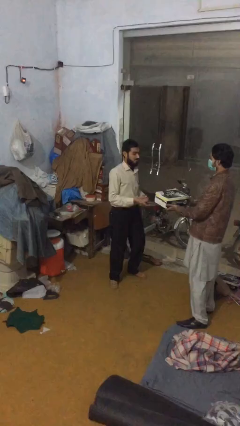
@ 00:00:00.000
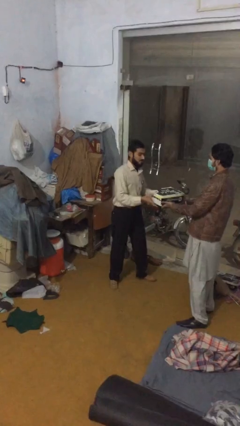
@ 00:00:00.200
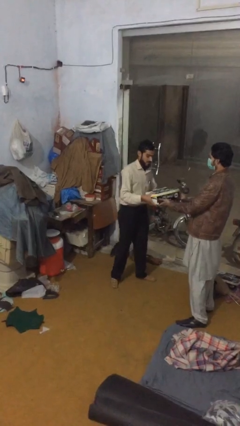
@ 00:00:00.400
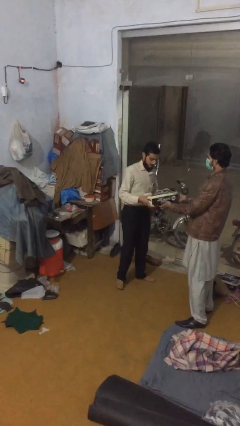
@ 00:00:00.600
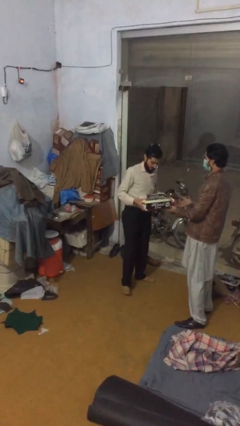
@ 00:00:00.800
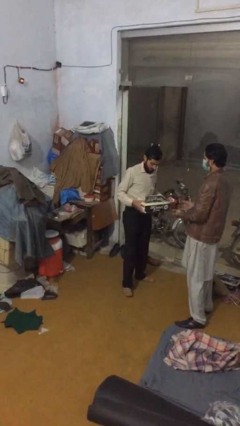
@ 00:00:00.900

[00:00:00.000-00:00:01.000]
person transfers object to person

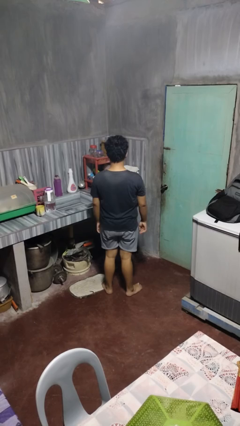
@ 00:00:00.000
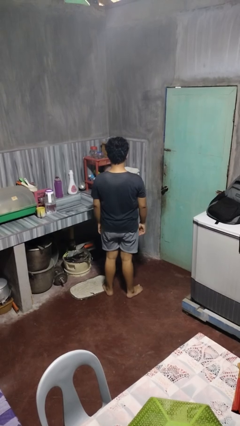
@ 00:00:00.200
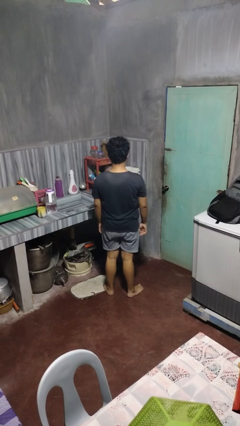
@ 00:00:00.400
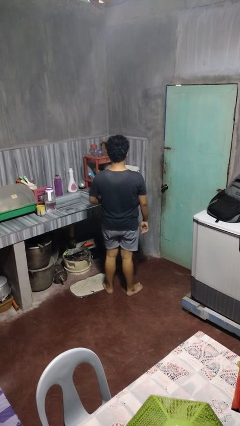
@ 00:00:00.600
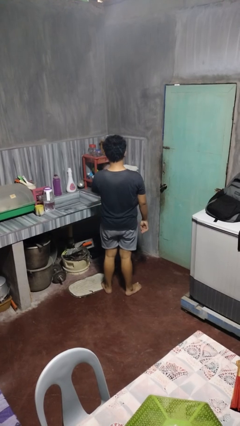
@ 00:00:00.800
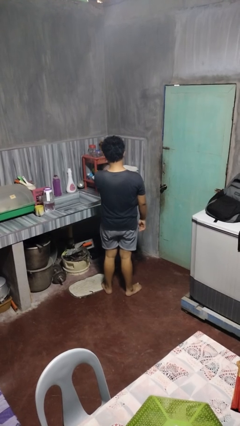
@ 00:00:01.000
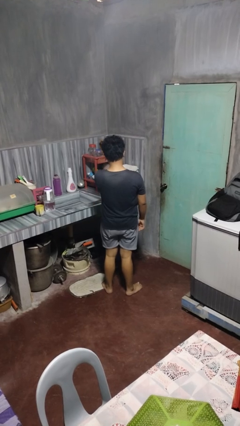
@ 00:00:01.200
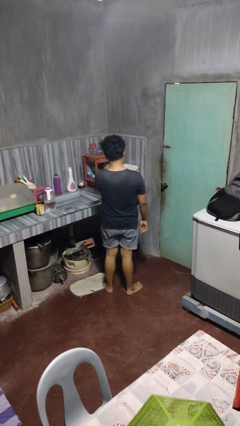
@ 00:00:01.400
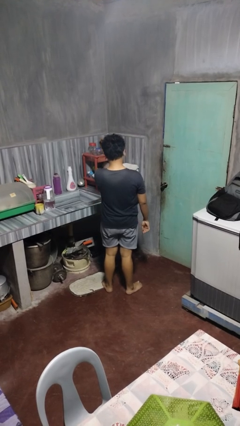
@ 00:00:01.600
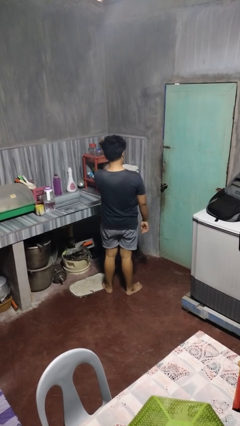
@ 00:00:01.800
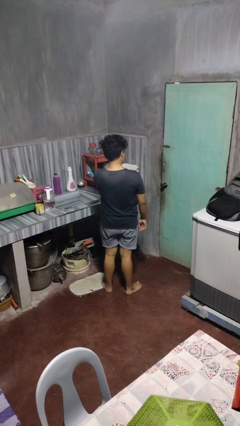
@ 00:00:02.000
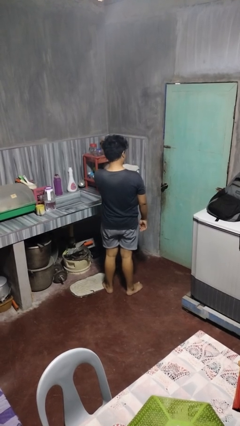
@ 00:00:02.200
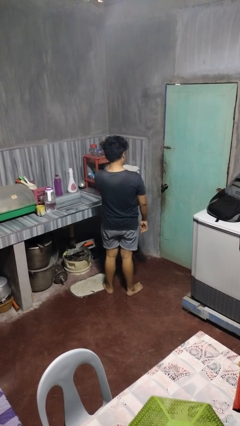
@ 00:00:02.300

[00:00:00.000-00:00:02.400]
person rubs eyes

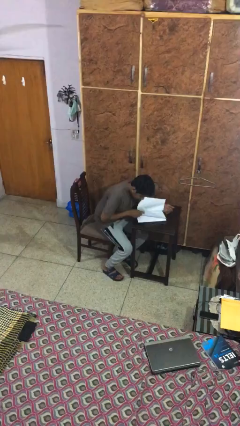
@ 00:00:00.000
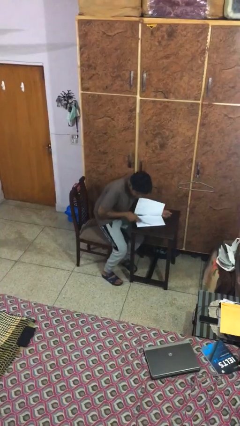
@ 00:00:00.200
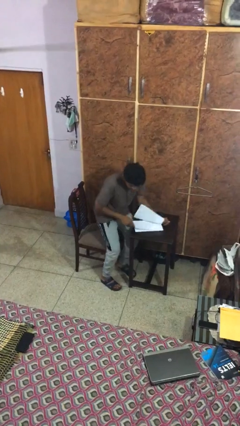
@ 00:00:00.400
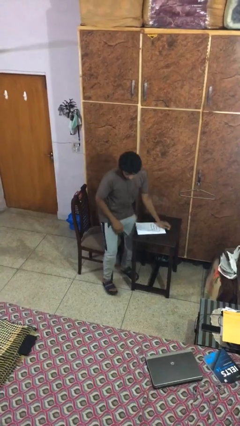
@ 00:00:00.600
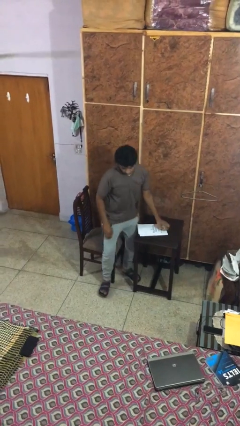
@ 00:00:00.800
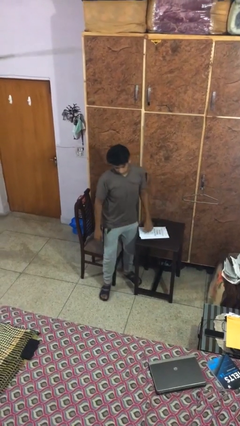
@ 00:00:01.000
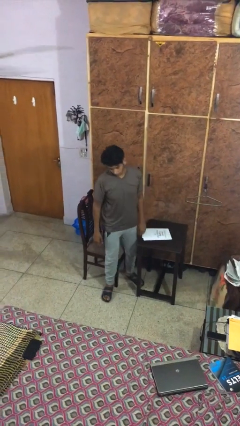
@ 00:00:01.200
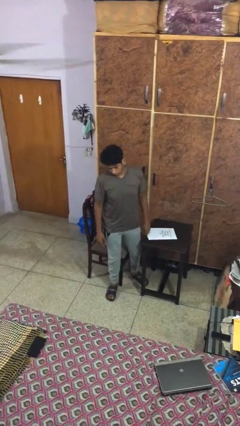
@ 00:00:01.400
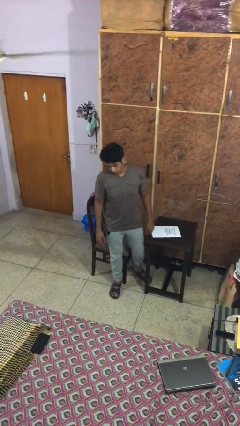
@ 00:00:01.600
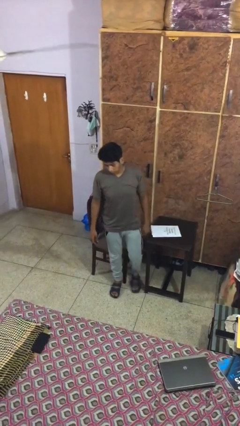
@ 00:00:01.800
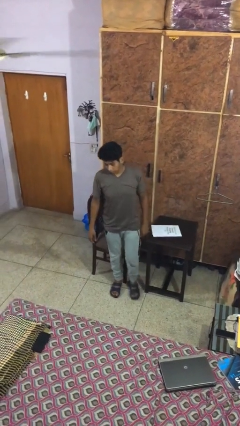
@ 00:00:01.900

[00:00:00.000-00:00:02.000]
person stands up

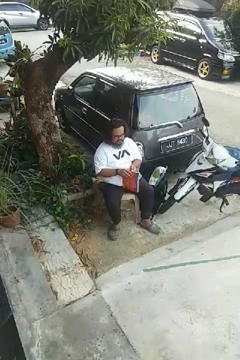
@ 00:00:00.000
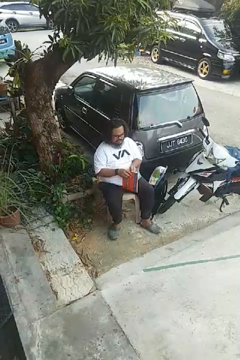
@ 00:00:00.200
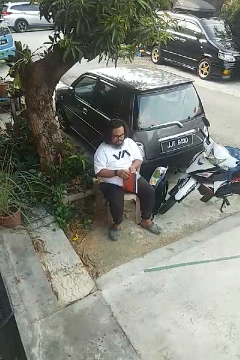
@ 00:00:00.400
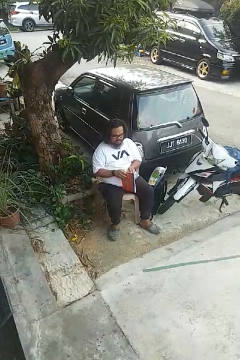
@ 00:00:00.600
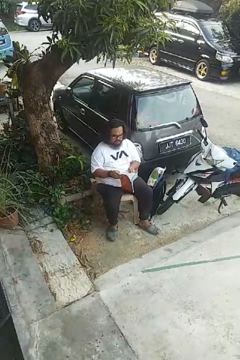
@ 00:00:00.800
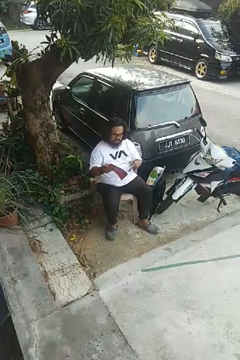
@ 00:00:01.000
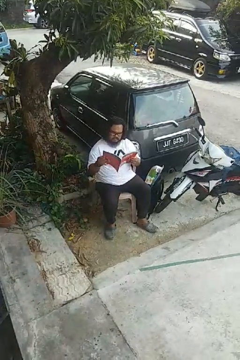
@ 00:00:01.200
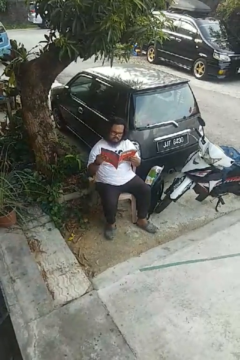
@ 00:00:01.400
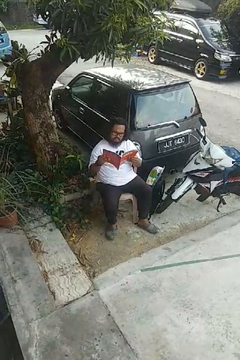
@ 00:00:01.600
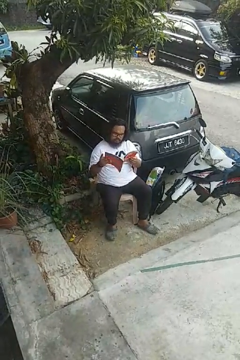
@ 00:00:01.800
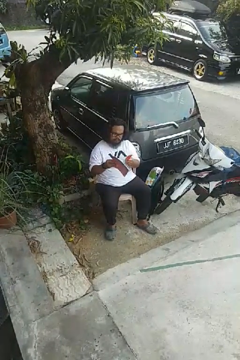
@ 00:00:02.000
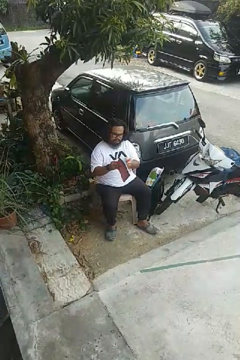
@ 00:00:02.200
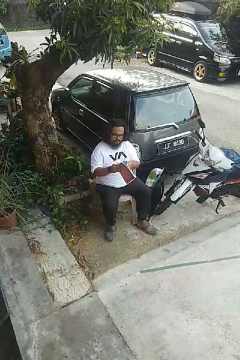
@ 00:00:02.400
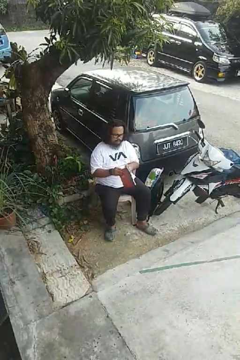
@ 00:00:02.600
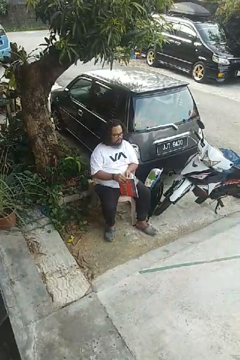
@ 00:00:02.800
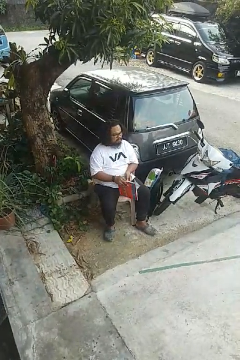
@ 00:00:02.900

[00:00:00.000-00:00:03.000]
person reads magazine

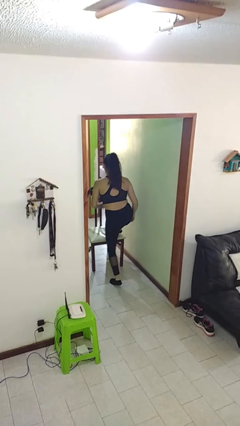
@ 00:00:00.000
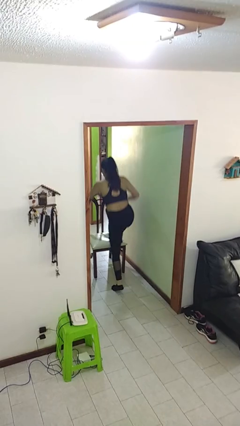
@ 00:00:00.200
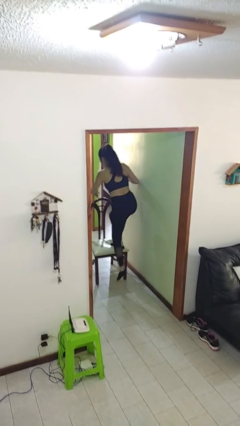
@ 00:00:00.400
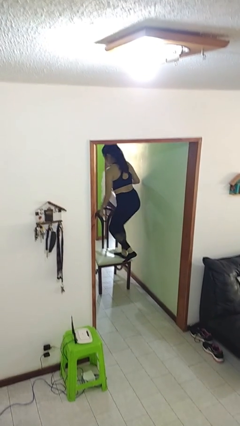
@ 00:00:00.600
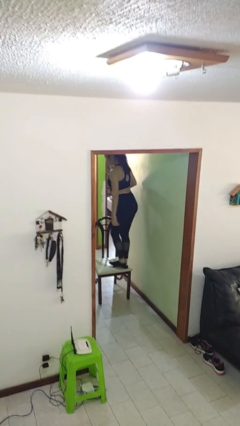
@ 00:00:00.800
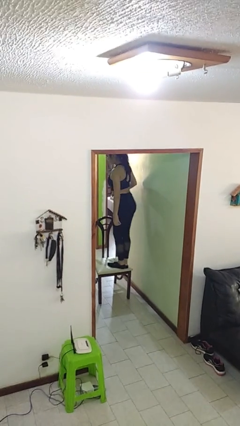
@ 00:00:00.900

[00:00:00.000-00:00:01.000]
person climbs on chair

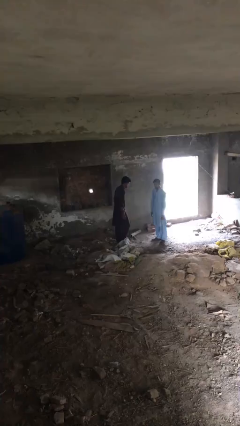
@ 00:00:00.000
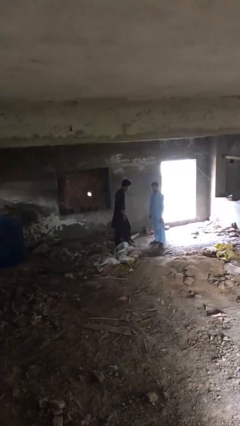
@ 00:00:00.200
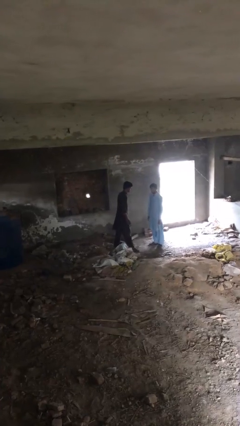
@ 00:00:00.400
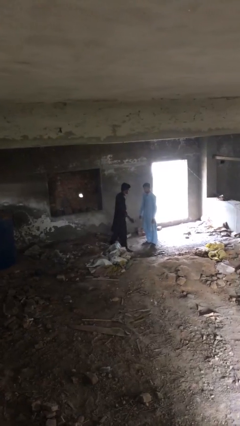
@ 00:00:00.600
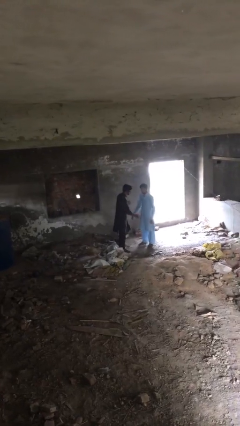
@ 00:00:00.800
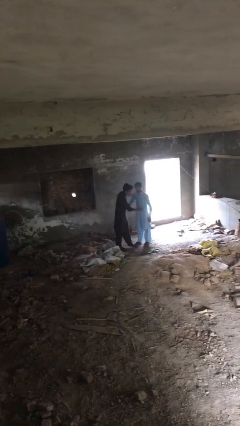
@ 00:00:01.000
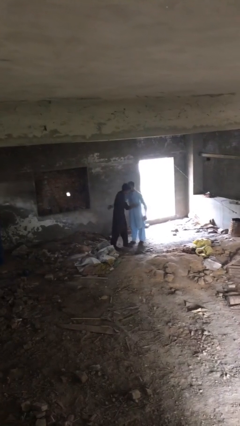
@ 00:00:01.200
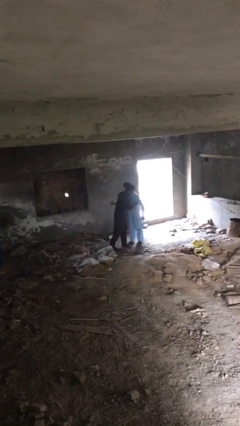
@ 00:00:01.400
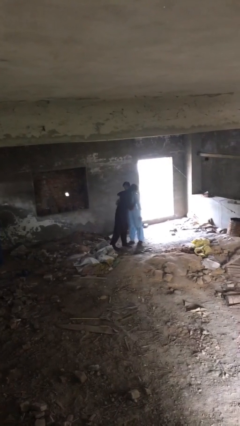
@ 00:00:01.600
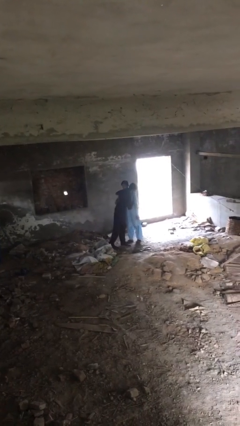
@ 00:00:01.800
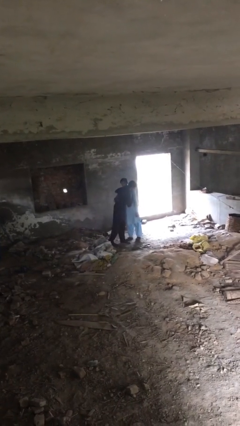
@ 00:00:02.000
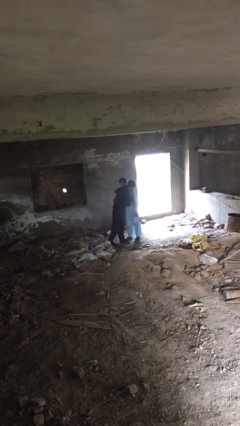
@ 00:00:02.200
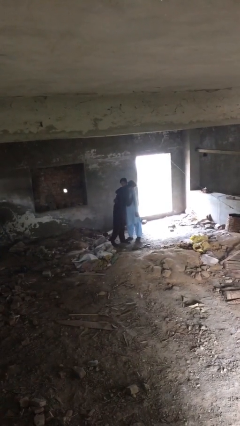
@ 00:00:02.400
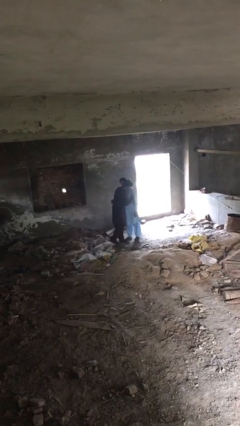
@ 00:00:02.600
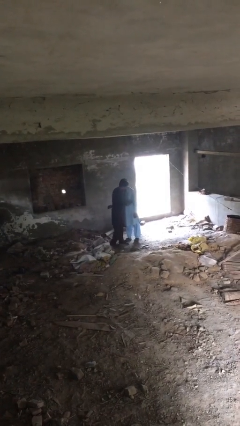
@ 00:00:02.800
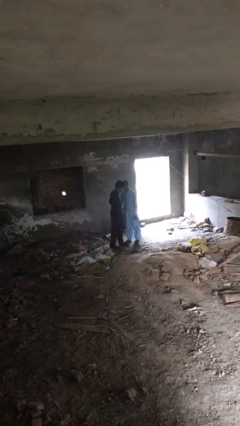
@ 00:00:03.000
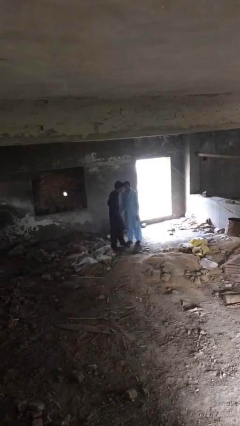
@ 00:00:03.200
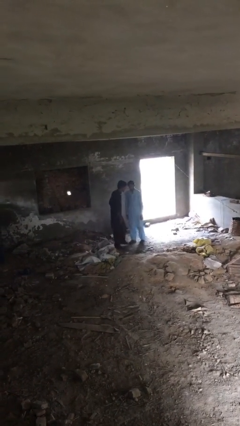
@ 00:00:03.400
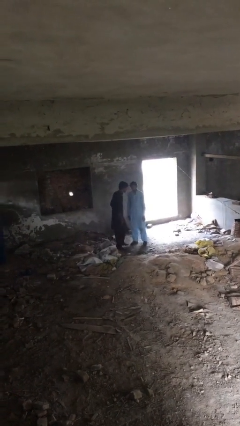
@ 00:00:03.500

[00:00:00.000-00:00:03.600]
person embraces person

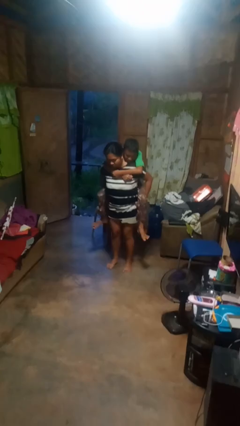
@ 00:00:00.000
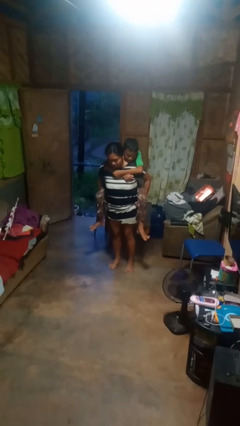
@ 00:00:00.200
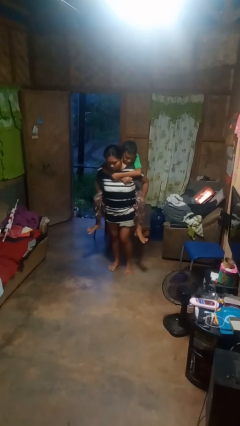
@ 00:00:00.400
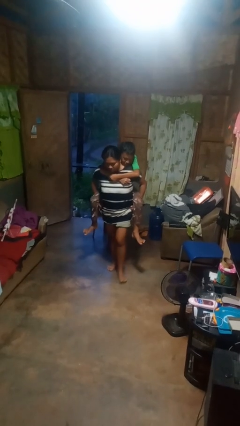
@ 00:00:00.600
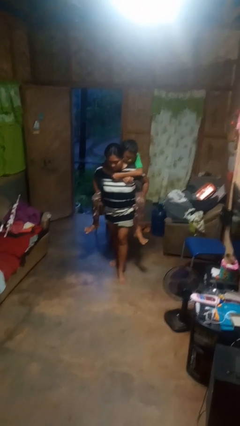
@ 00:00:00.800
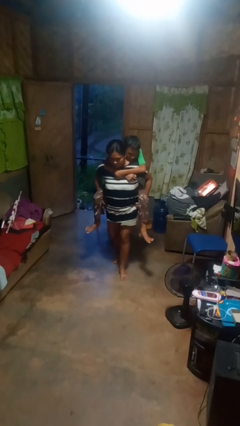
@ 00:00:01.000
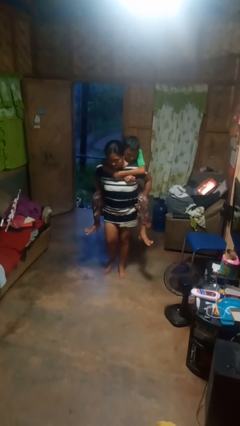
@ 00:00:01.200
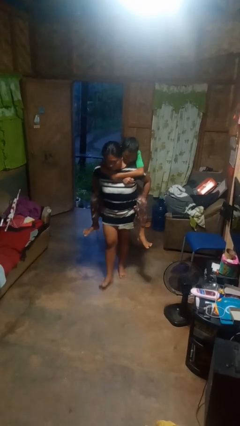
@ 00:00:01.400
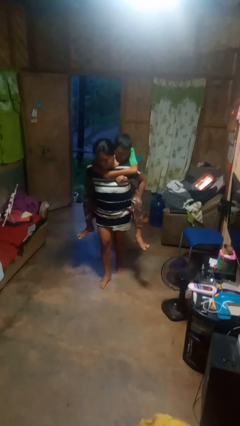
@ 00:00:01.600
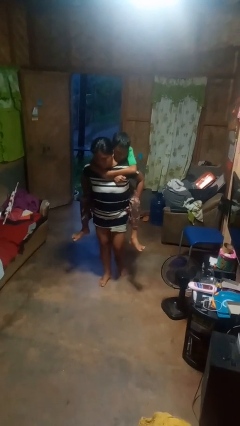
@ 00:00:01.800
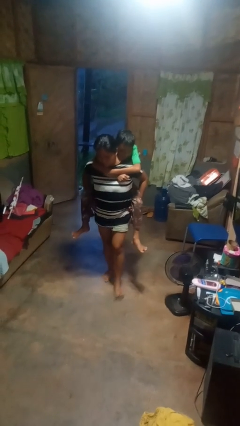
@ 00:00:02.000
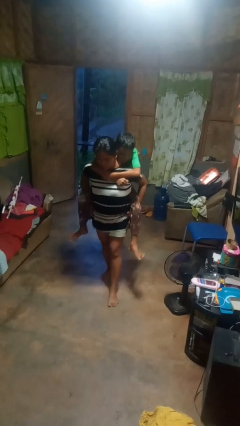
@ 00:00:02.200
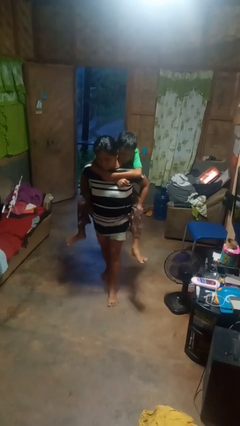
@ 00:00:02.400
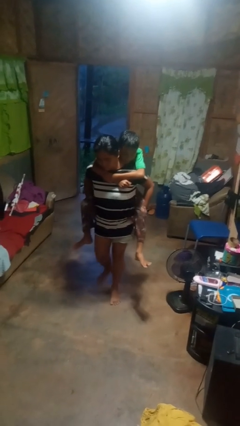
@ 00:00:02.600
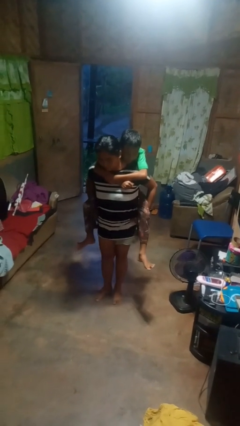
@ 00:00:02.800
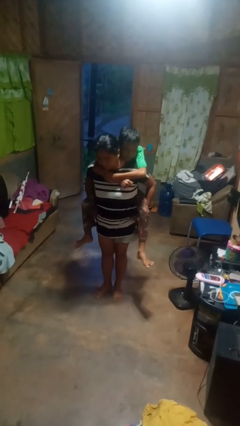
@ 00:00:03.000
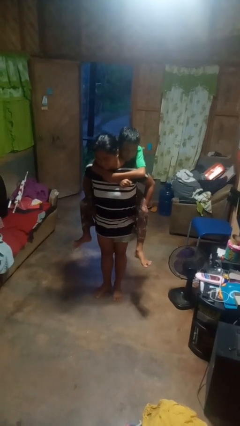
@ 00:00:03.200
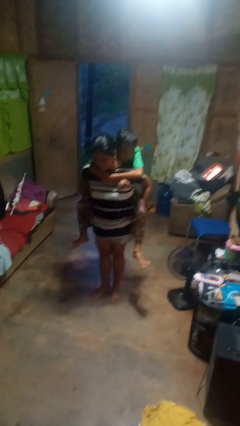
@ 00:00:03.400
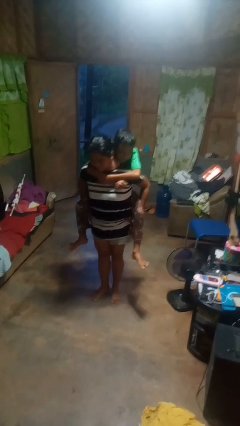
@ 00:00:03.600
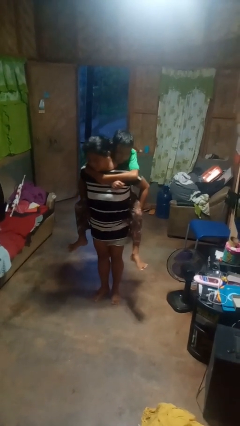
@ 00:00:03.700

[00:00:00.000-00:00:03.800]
person carries person on back

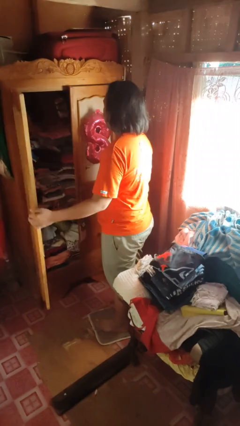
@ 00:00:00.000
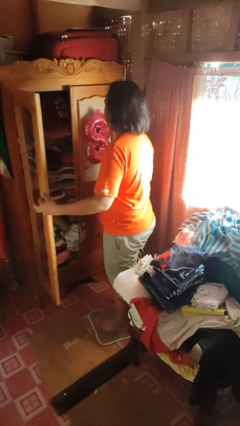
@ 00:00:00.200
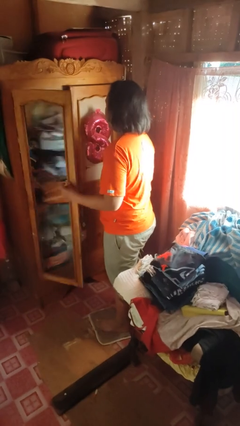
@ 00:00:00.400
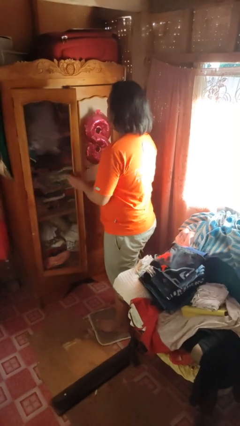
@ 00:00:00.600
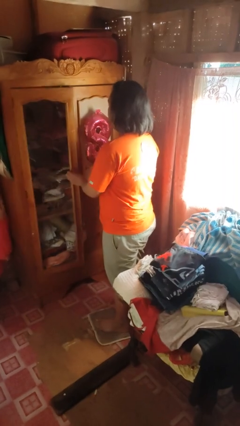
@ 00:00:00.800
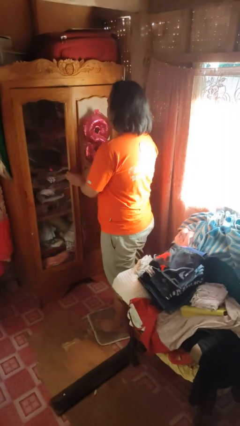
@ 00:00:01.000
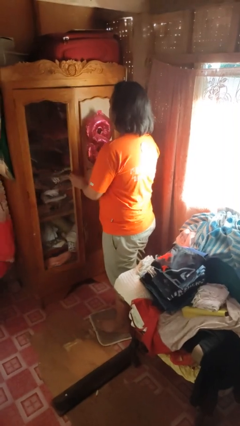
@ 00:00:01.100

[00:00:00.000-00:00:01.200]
person closes dresser drawer
